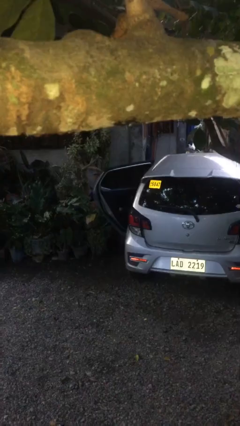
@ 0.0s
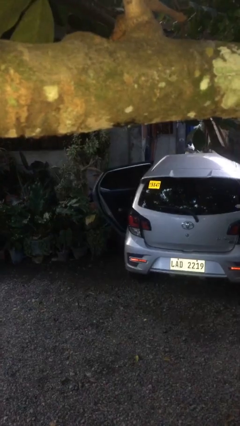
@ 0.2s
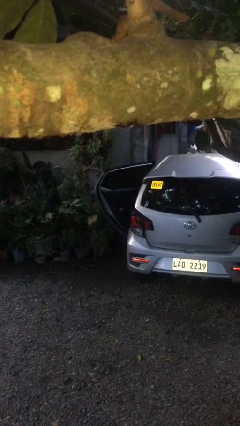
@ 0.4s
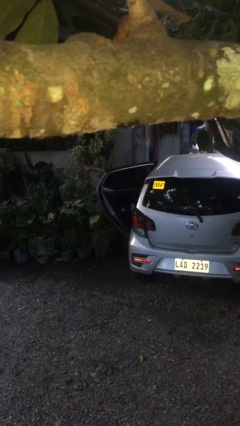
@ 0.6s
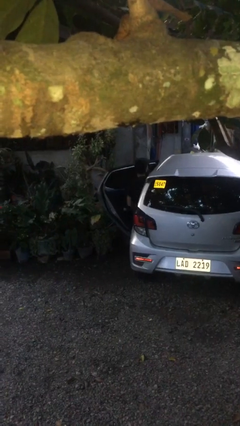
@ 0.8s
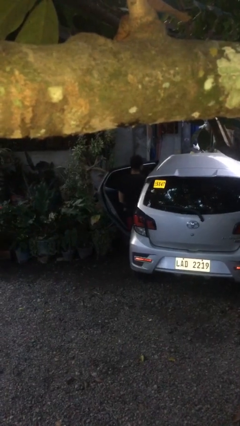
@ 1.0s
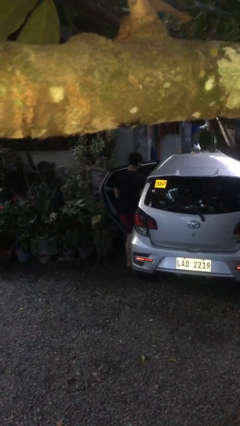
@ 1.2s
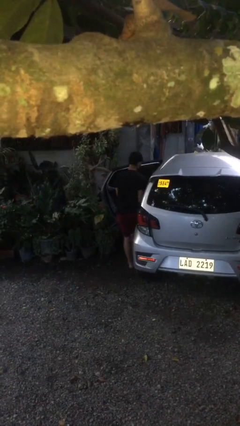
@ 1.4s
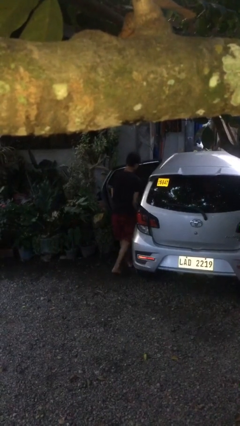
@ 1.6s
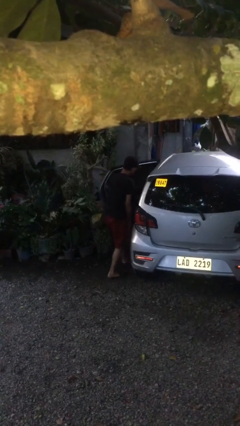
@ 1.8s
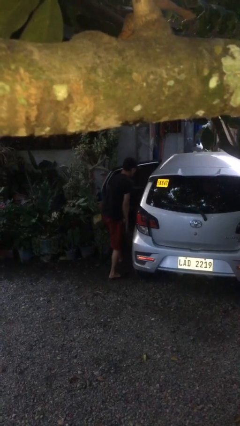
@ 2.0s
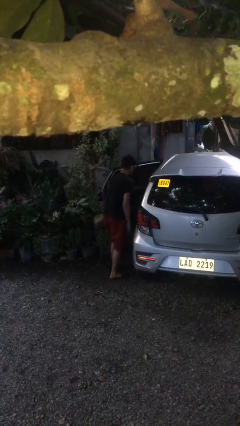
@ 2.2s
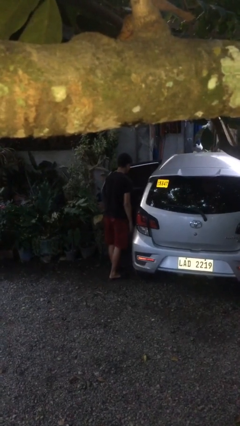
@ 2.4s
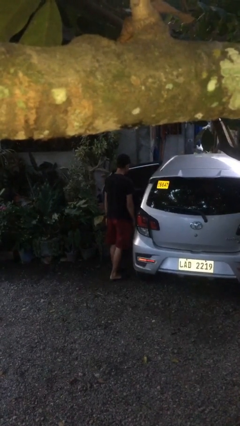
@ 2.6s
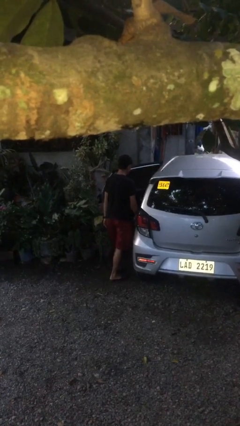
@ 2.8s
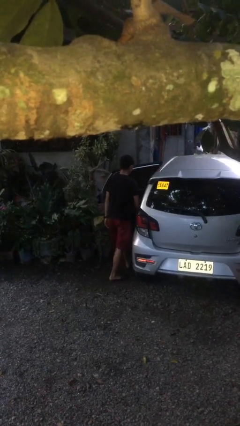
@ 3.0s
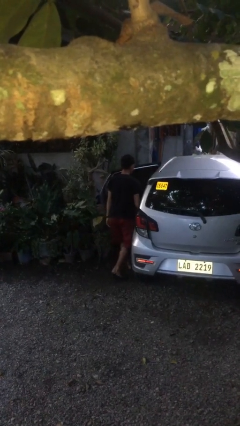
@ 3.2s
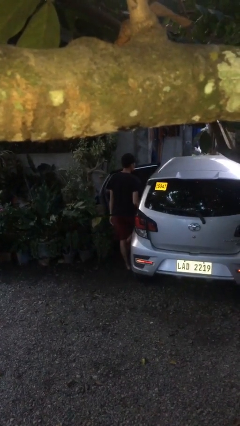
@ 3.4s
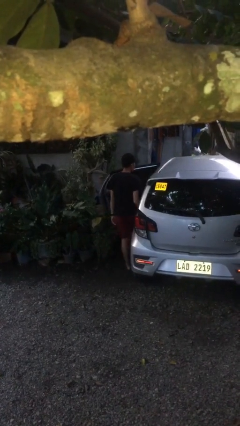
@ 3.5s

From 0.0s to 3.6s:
person exits car

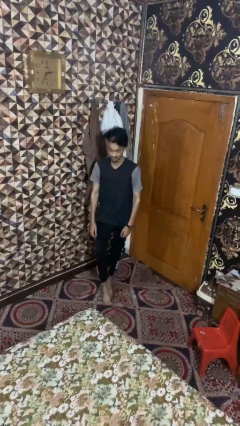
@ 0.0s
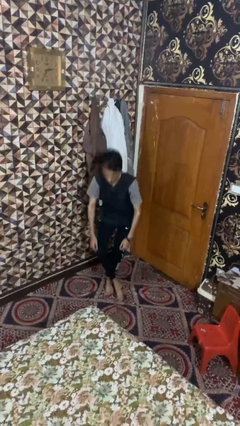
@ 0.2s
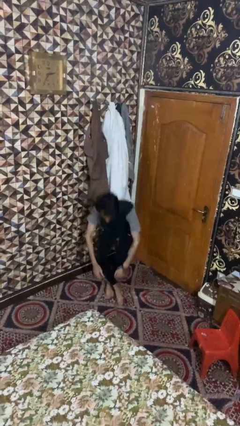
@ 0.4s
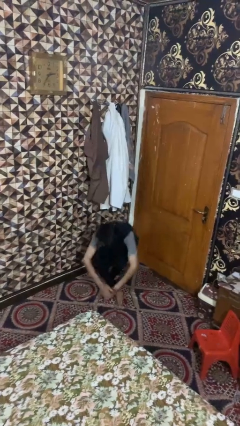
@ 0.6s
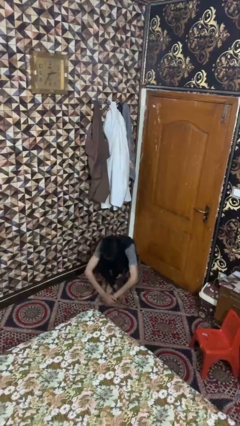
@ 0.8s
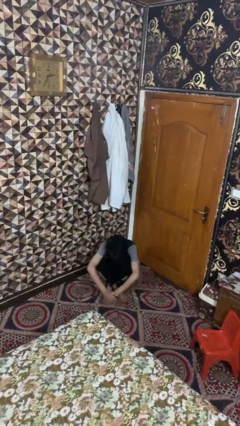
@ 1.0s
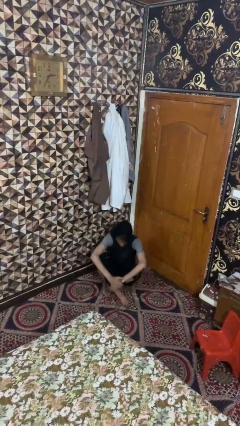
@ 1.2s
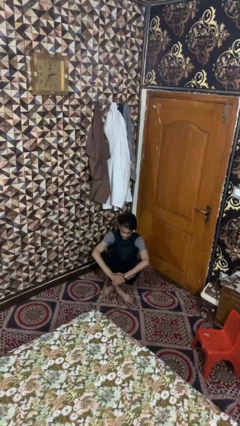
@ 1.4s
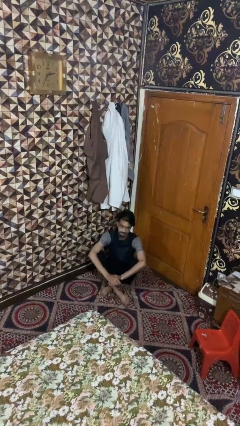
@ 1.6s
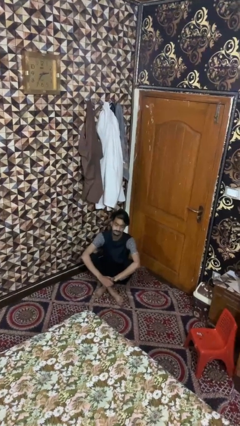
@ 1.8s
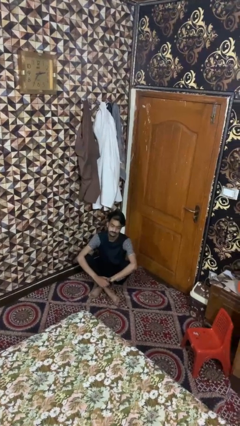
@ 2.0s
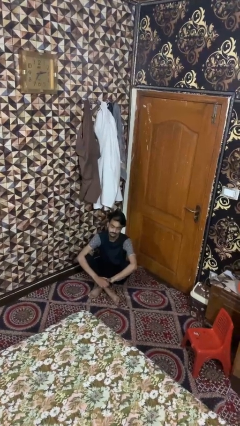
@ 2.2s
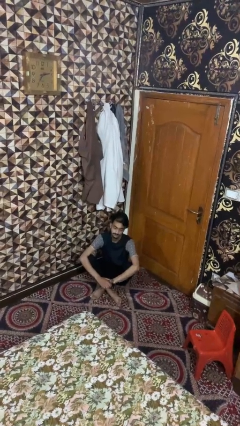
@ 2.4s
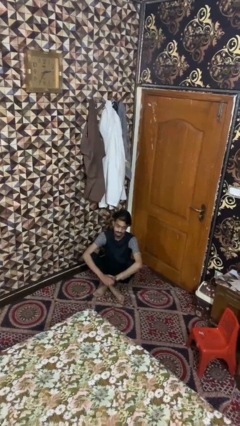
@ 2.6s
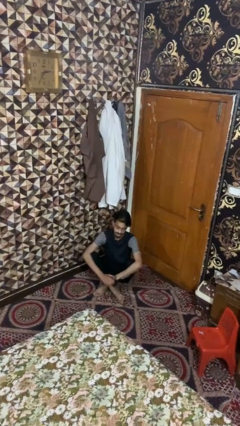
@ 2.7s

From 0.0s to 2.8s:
person sits crisscross

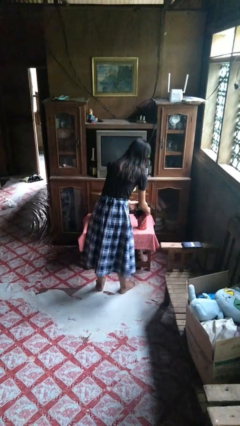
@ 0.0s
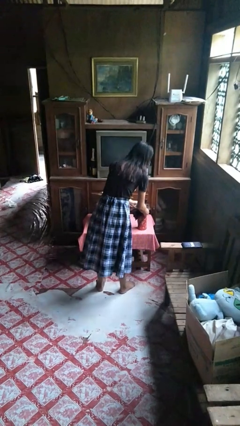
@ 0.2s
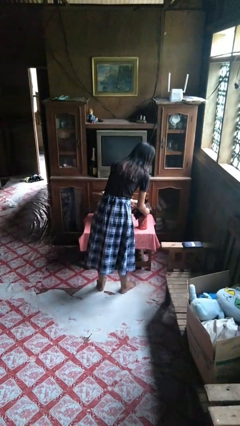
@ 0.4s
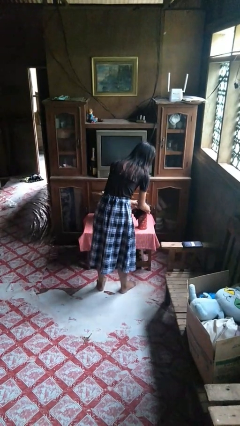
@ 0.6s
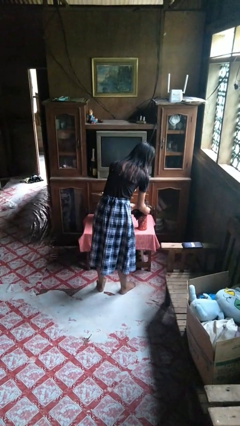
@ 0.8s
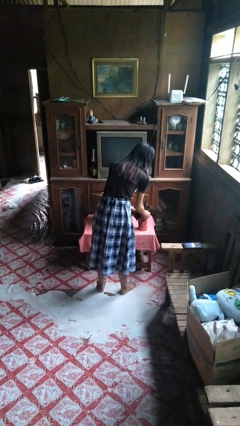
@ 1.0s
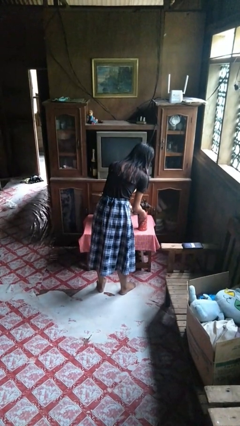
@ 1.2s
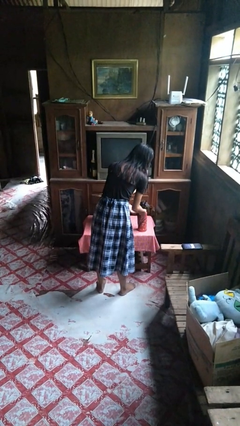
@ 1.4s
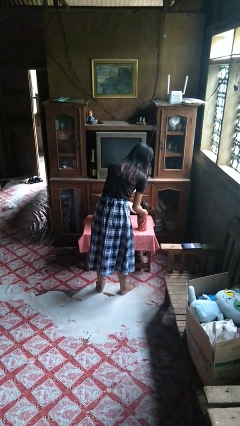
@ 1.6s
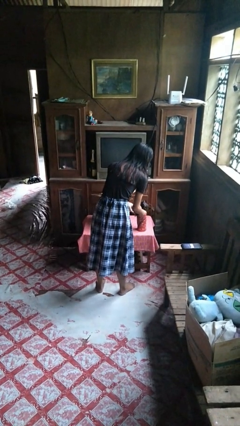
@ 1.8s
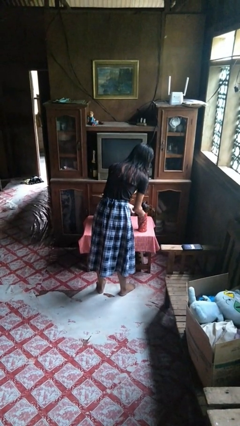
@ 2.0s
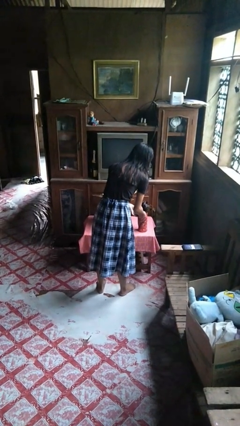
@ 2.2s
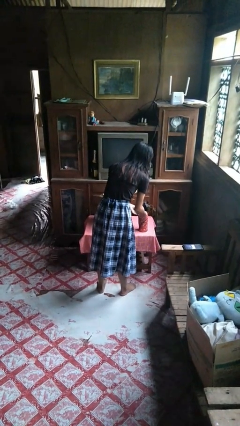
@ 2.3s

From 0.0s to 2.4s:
person arranges flowers in vase

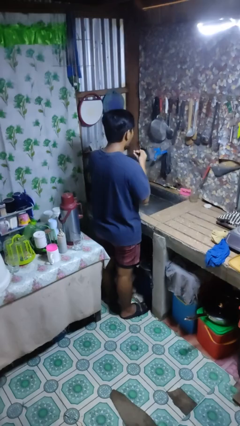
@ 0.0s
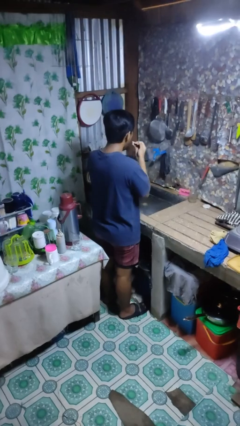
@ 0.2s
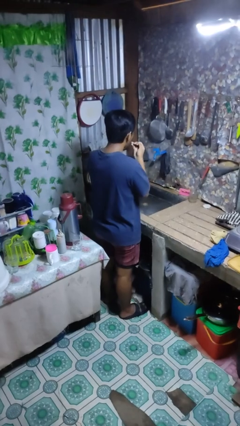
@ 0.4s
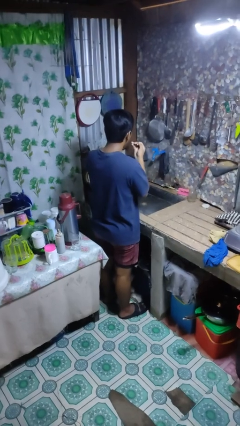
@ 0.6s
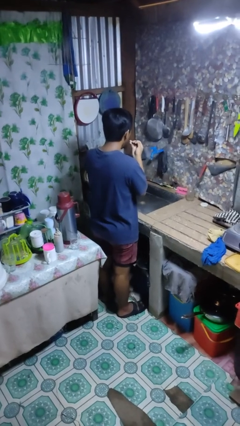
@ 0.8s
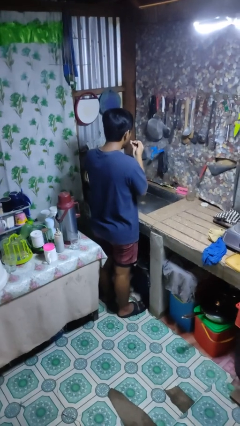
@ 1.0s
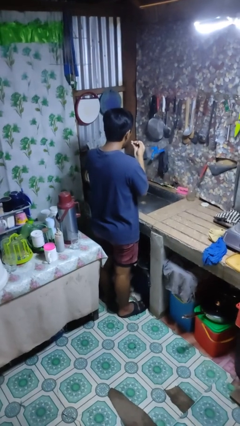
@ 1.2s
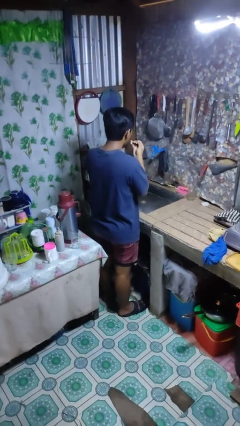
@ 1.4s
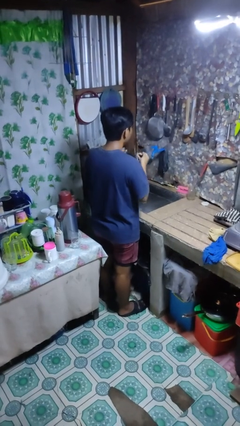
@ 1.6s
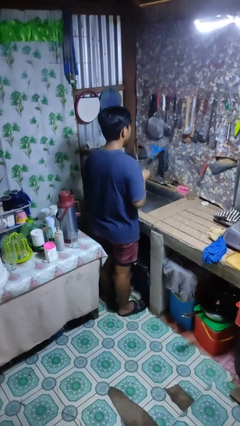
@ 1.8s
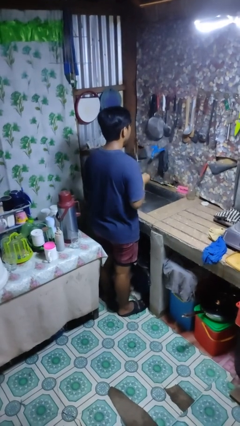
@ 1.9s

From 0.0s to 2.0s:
person flosses

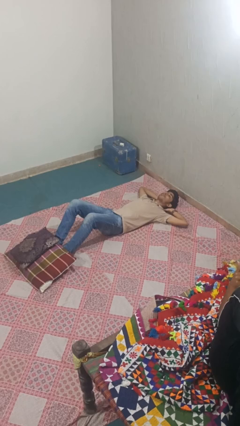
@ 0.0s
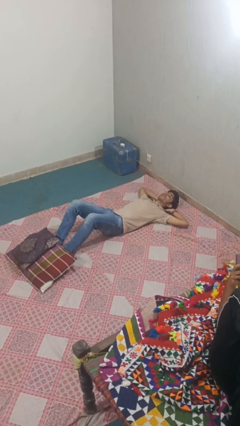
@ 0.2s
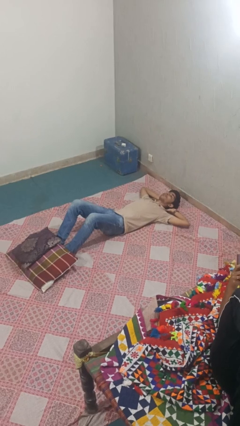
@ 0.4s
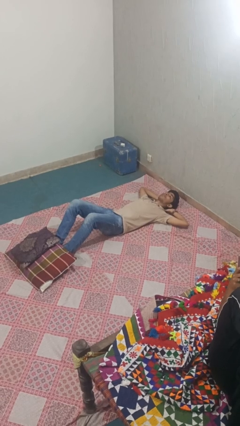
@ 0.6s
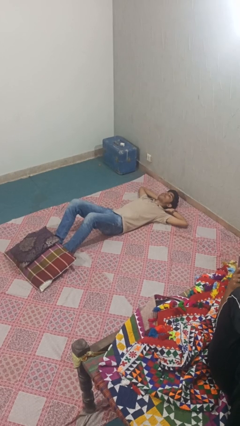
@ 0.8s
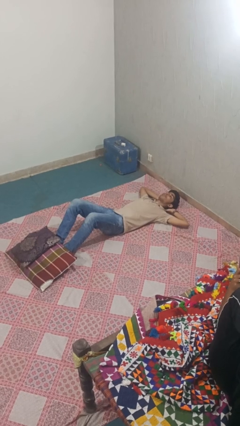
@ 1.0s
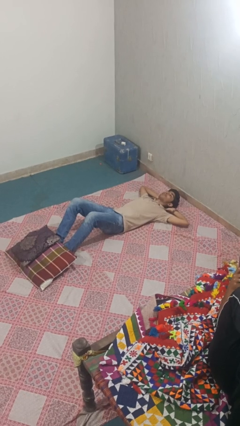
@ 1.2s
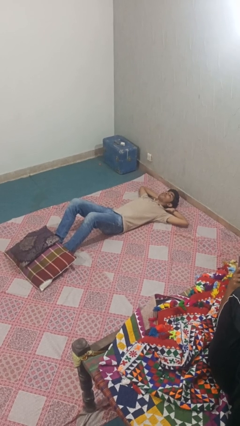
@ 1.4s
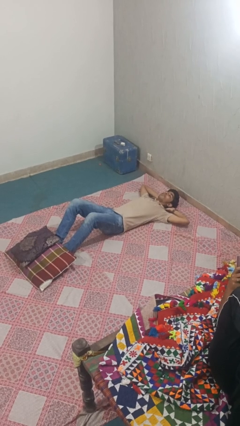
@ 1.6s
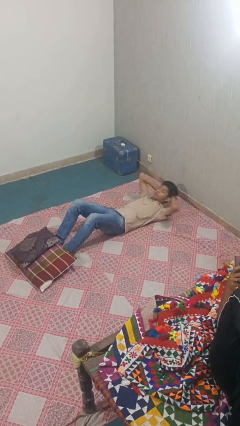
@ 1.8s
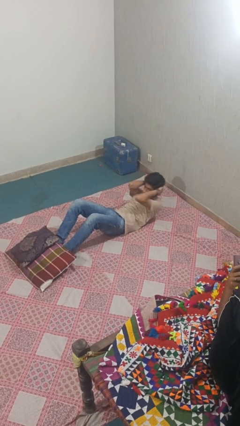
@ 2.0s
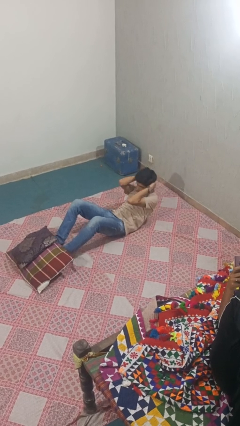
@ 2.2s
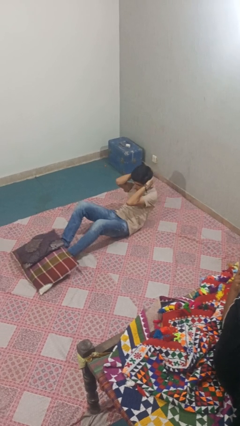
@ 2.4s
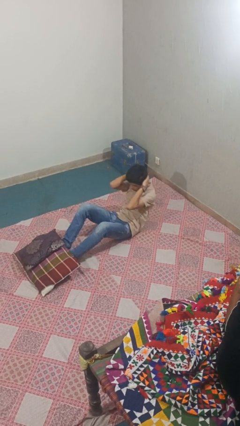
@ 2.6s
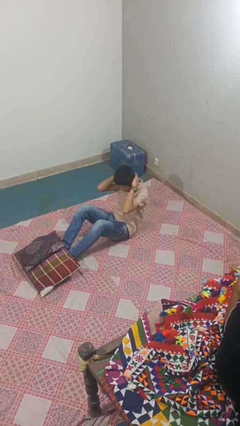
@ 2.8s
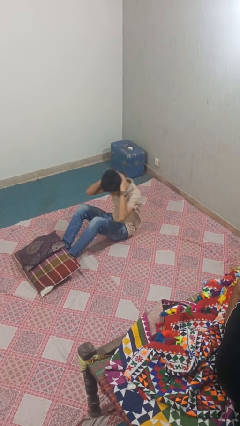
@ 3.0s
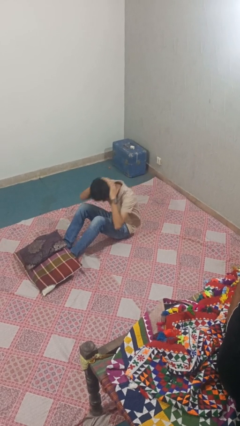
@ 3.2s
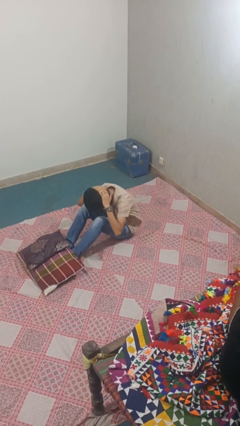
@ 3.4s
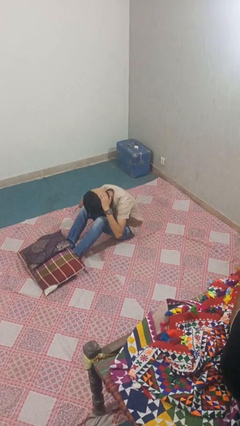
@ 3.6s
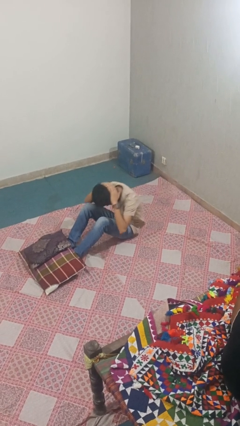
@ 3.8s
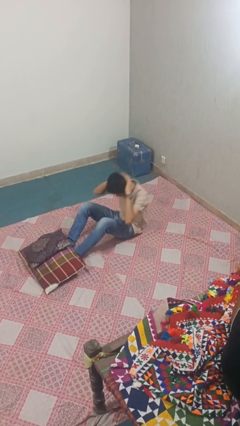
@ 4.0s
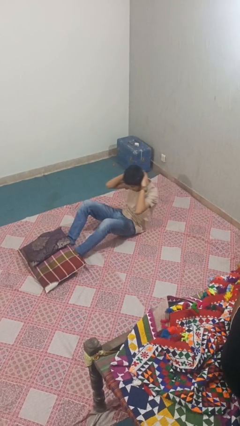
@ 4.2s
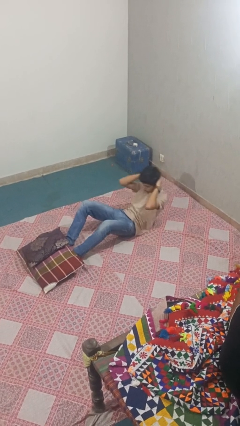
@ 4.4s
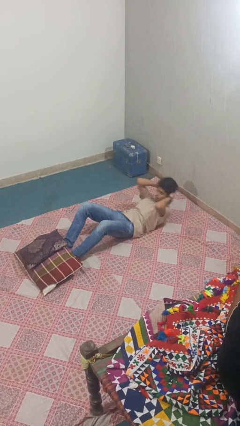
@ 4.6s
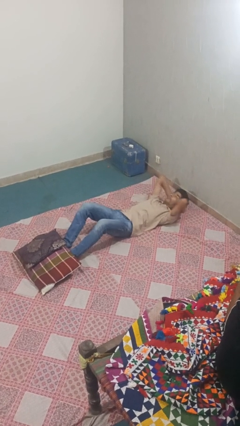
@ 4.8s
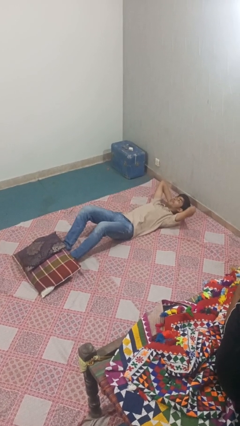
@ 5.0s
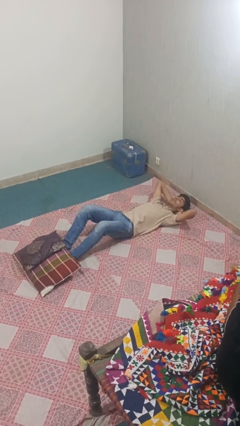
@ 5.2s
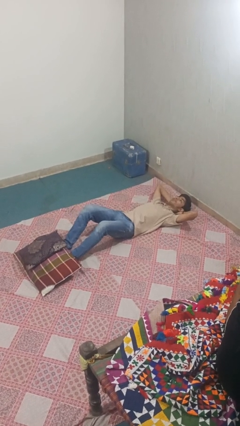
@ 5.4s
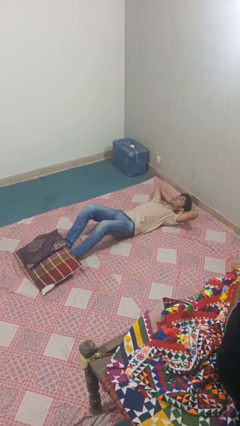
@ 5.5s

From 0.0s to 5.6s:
person exercises with situp

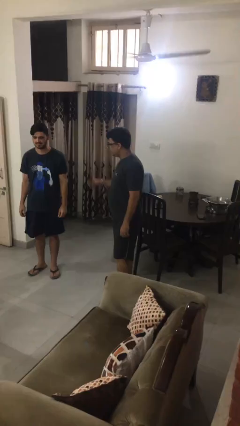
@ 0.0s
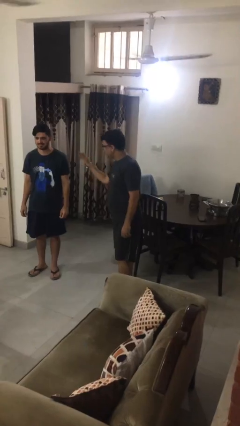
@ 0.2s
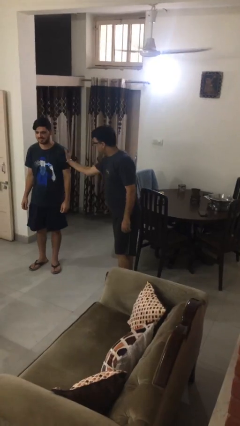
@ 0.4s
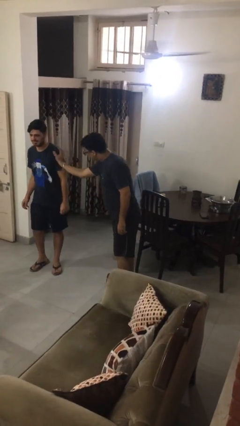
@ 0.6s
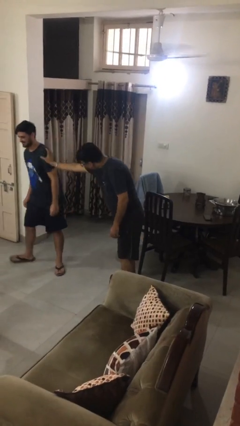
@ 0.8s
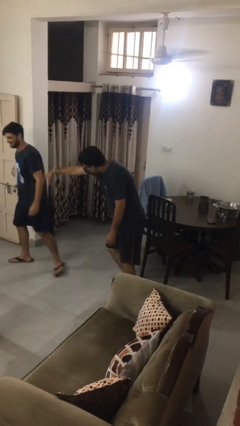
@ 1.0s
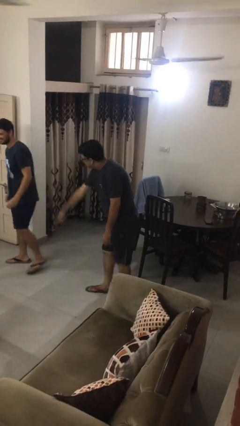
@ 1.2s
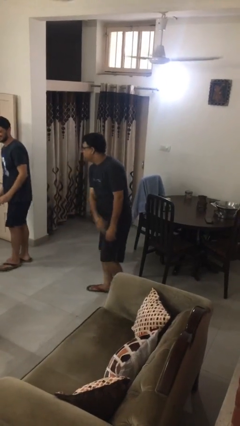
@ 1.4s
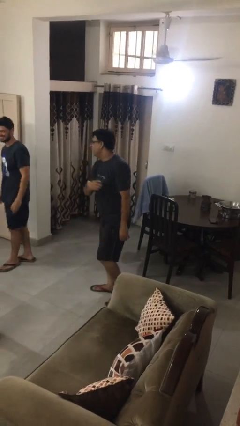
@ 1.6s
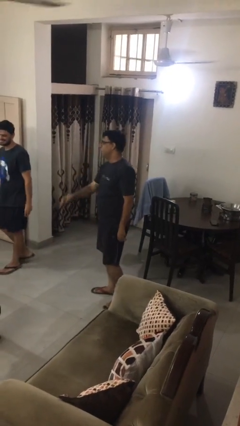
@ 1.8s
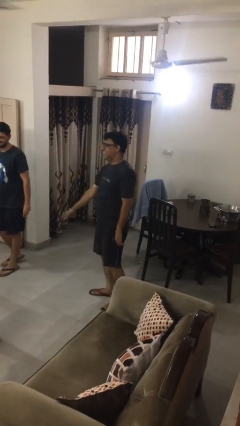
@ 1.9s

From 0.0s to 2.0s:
person shoves person
